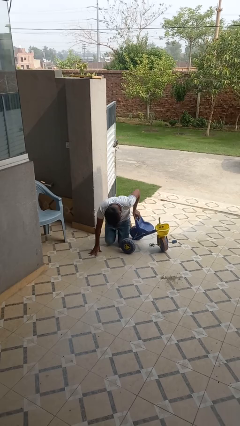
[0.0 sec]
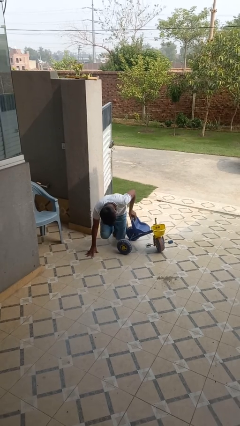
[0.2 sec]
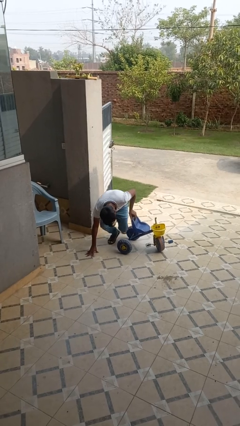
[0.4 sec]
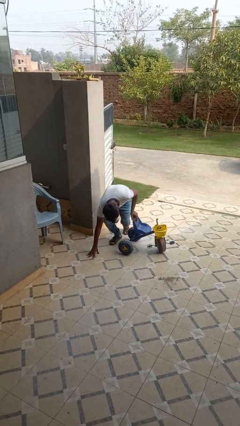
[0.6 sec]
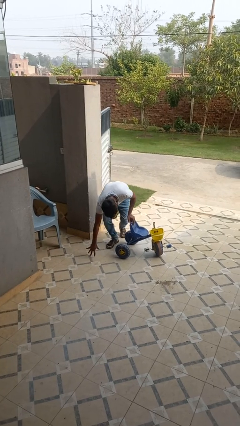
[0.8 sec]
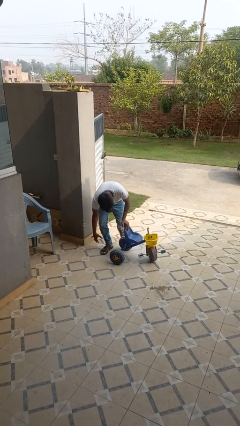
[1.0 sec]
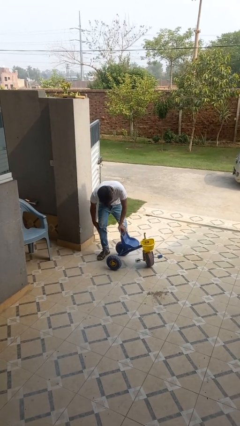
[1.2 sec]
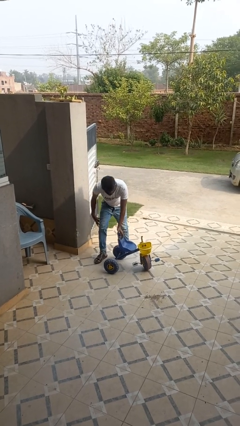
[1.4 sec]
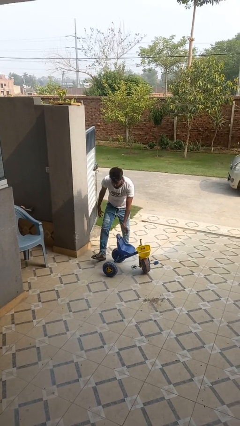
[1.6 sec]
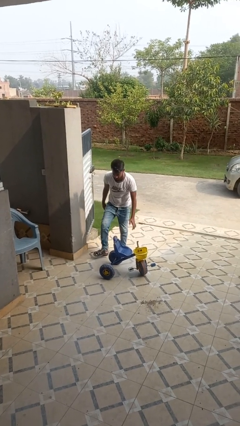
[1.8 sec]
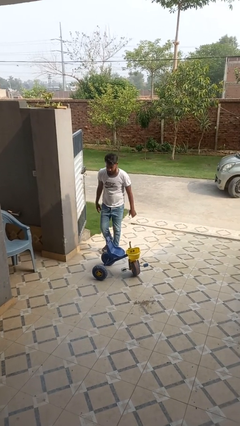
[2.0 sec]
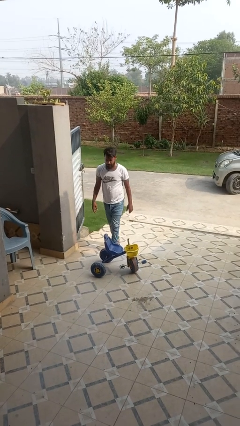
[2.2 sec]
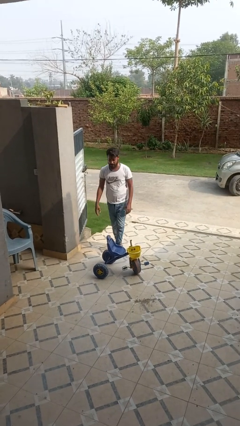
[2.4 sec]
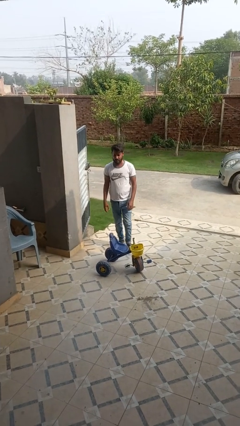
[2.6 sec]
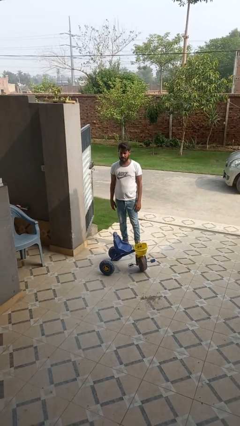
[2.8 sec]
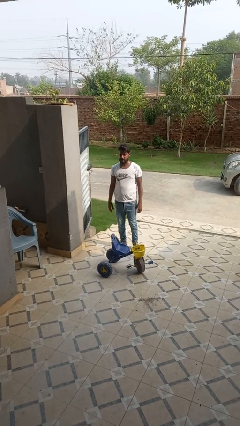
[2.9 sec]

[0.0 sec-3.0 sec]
person stands up from floor

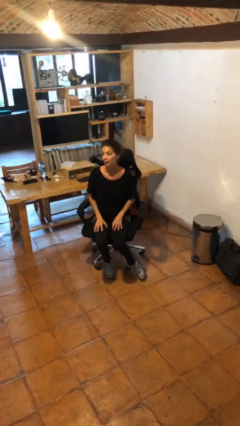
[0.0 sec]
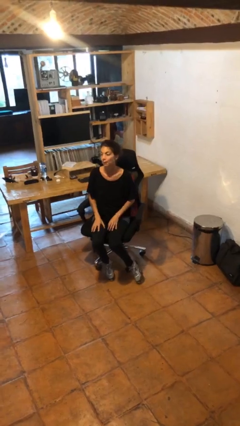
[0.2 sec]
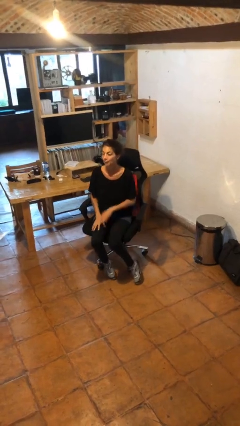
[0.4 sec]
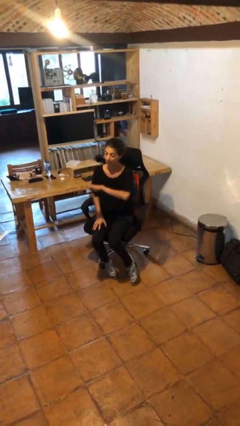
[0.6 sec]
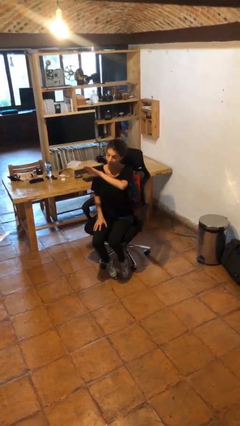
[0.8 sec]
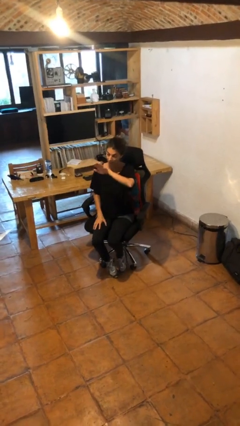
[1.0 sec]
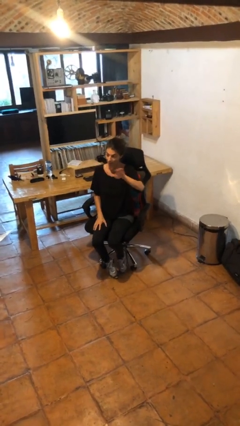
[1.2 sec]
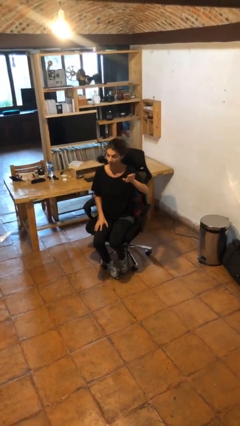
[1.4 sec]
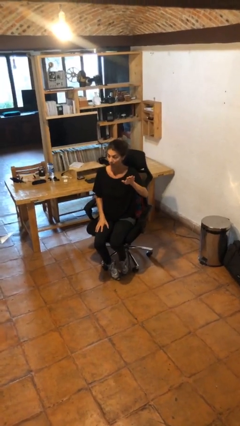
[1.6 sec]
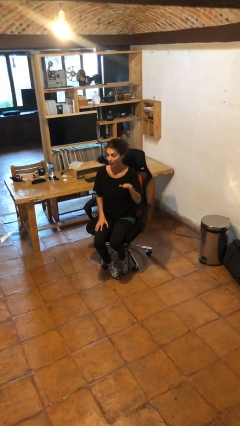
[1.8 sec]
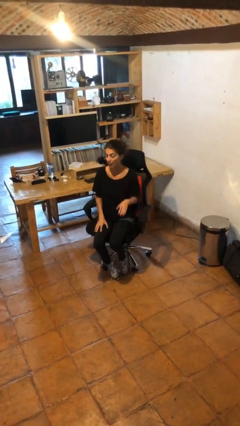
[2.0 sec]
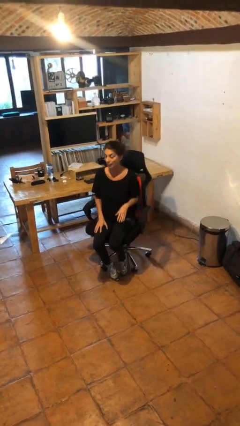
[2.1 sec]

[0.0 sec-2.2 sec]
person gestures swipe left

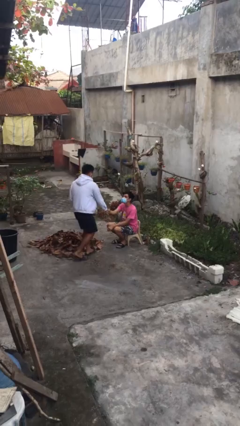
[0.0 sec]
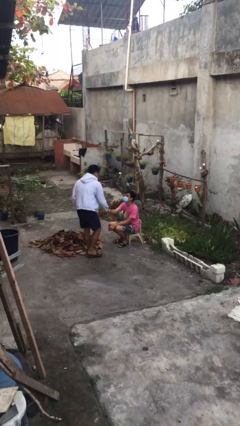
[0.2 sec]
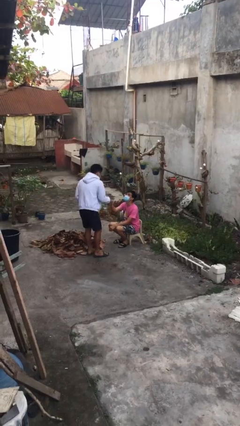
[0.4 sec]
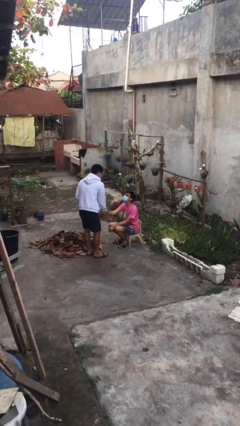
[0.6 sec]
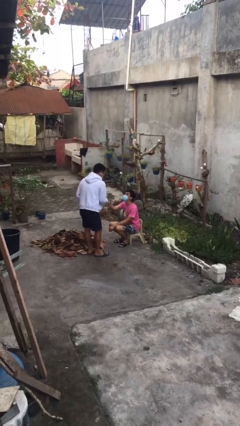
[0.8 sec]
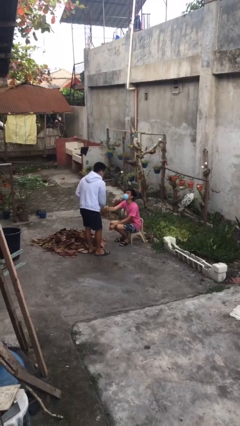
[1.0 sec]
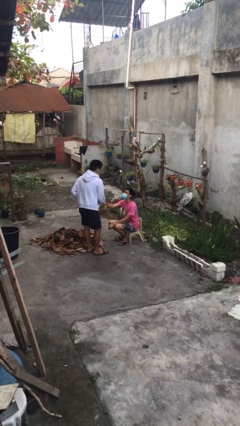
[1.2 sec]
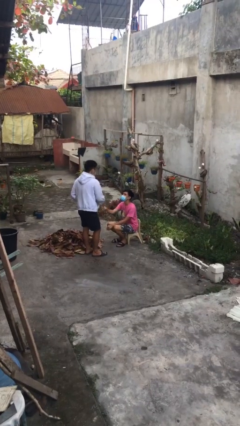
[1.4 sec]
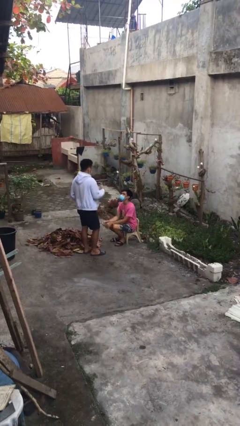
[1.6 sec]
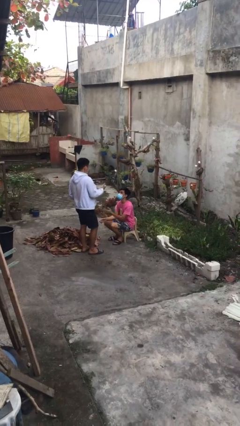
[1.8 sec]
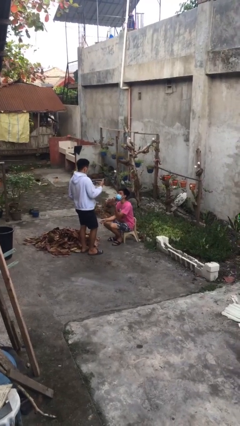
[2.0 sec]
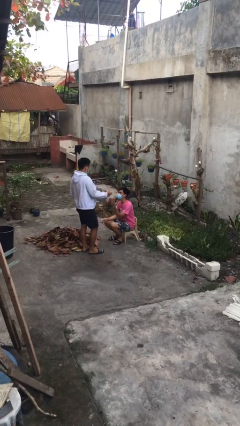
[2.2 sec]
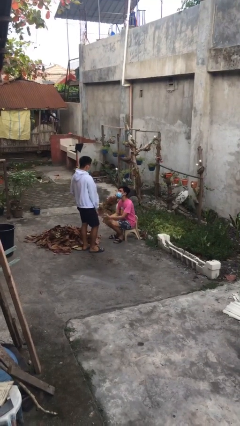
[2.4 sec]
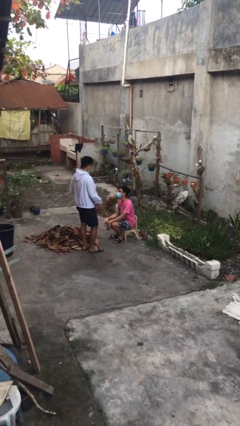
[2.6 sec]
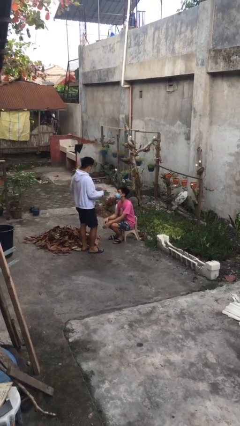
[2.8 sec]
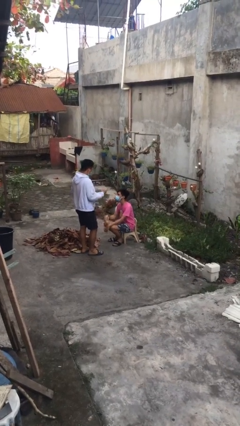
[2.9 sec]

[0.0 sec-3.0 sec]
person shakes hand

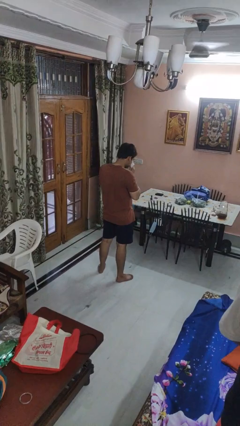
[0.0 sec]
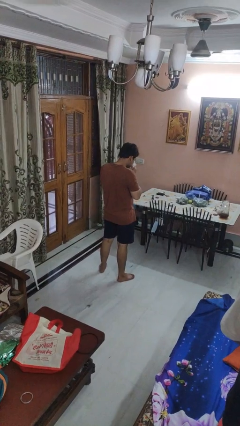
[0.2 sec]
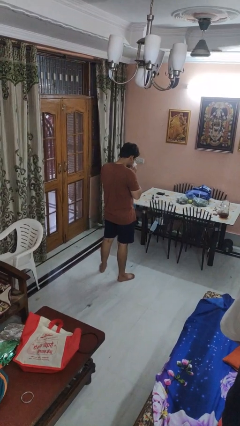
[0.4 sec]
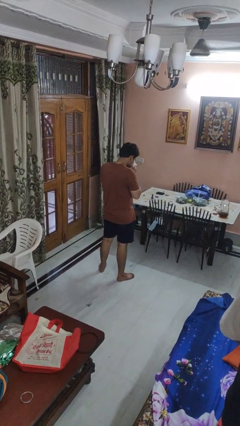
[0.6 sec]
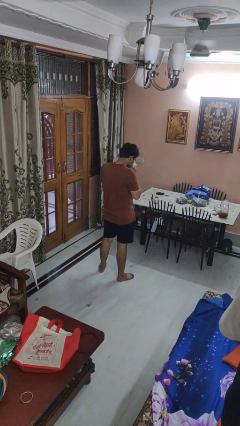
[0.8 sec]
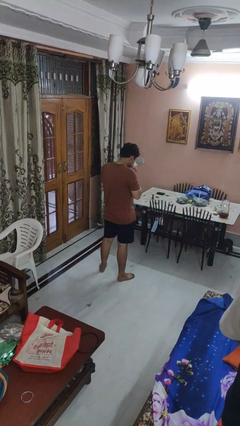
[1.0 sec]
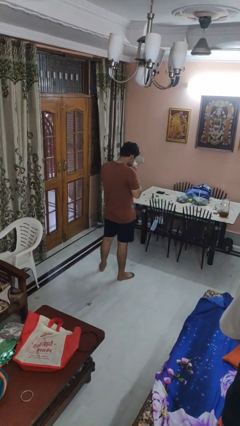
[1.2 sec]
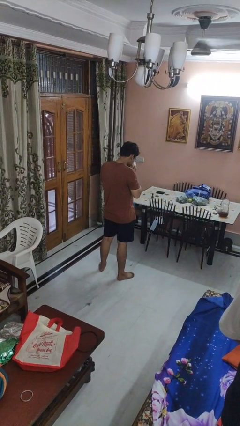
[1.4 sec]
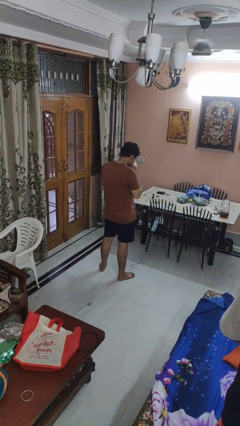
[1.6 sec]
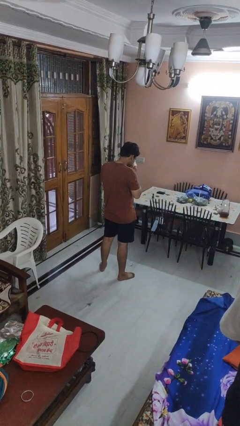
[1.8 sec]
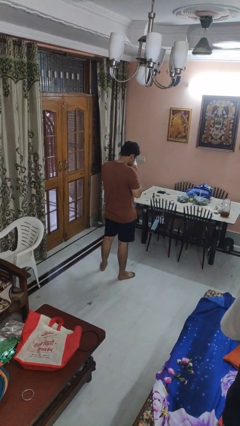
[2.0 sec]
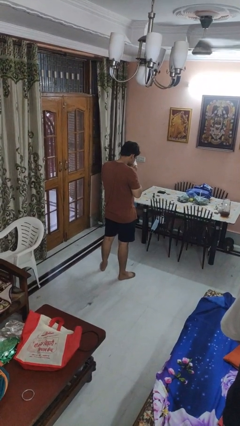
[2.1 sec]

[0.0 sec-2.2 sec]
person blows nose

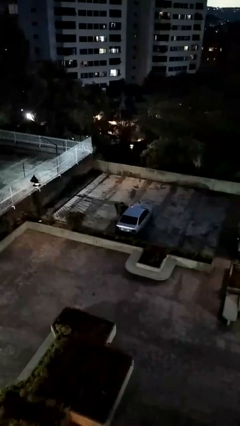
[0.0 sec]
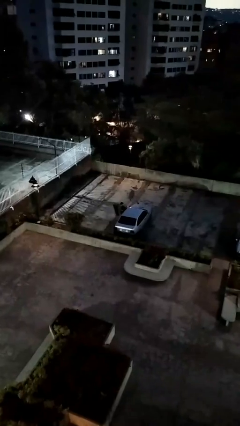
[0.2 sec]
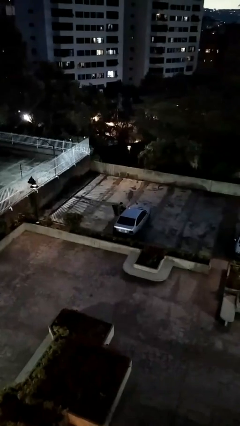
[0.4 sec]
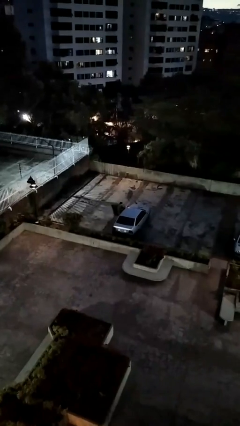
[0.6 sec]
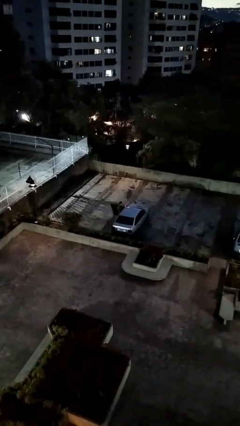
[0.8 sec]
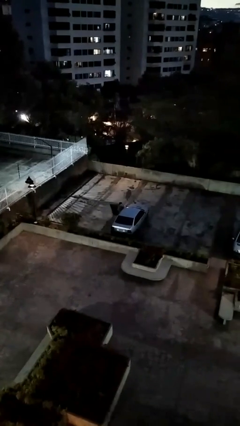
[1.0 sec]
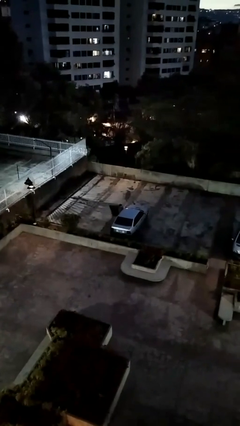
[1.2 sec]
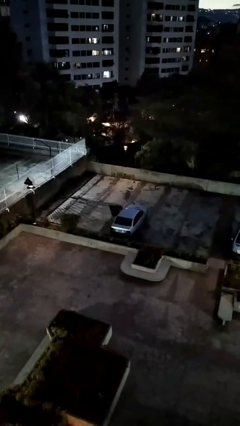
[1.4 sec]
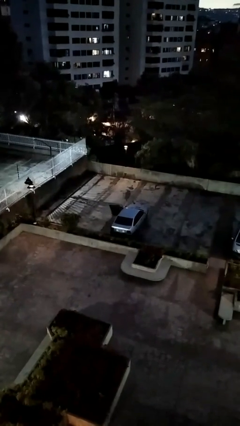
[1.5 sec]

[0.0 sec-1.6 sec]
person enters car

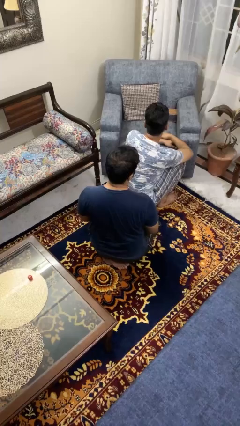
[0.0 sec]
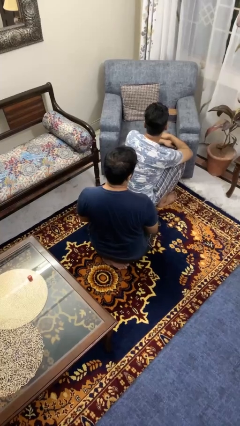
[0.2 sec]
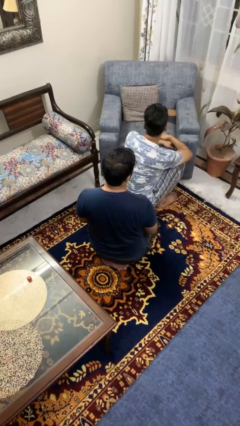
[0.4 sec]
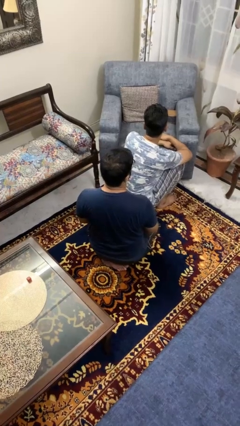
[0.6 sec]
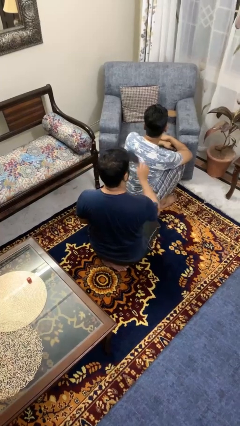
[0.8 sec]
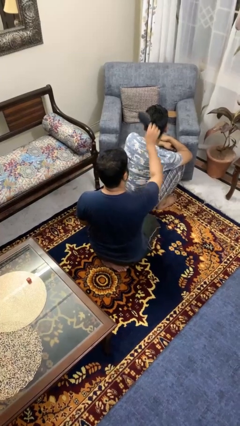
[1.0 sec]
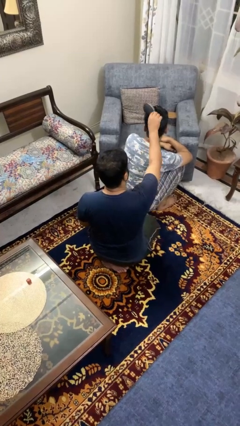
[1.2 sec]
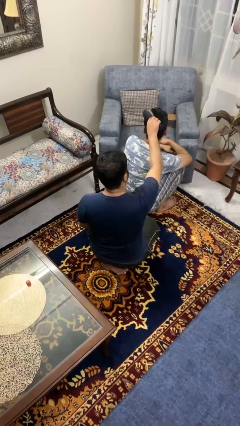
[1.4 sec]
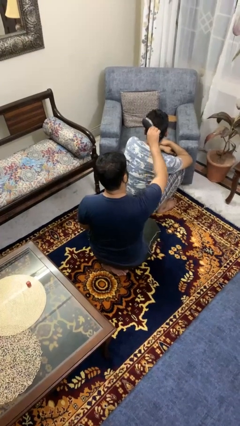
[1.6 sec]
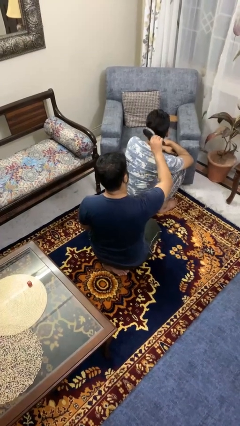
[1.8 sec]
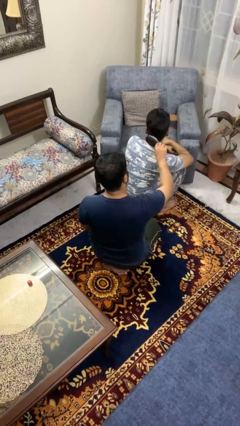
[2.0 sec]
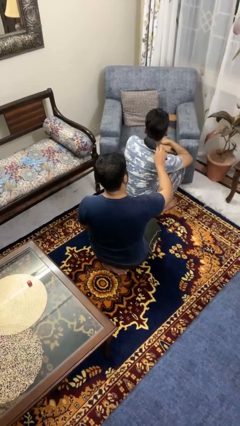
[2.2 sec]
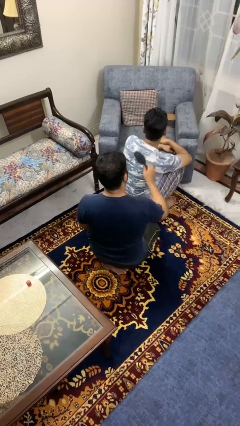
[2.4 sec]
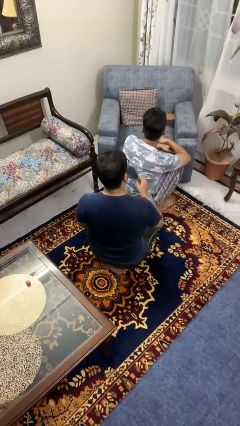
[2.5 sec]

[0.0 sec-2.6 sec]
person brushes hair of person

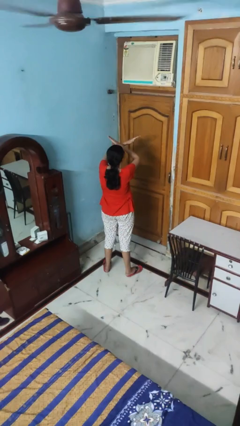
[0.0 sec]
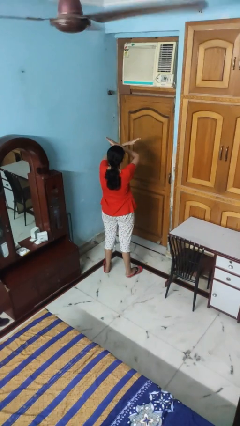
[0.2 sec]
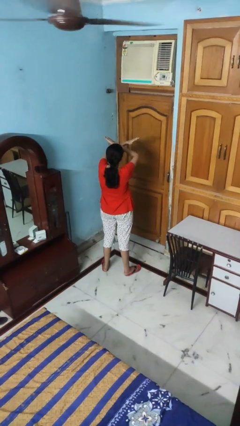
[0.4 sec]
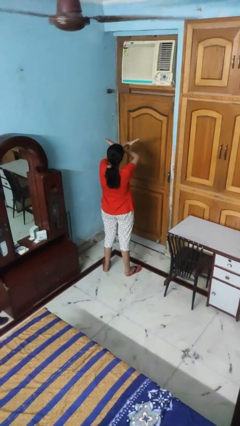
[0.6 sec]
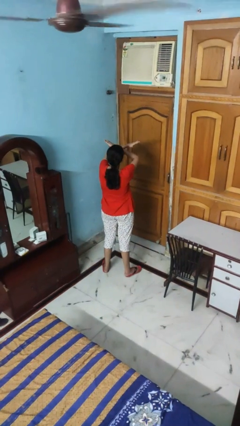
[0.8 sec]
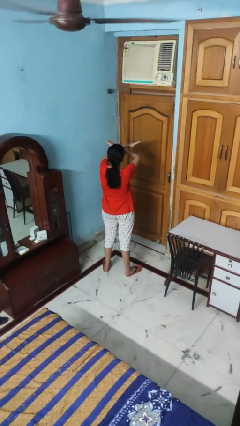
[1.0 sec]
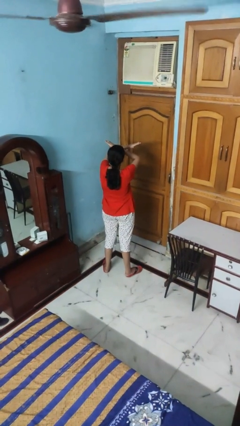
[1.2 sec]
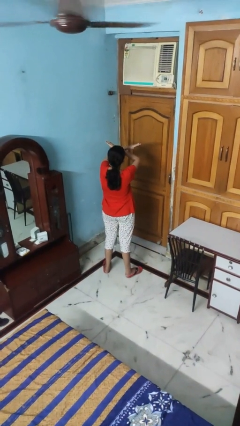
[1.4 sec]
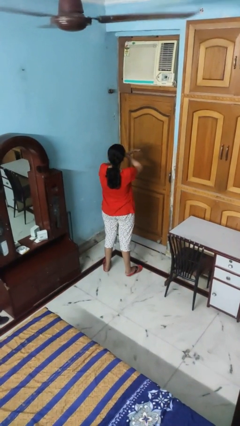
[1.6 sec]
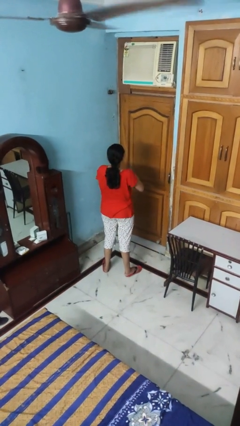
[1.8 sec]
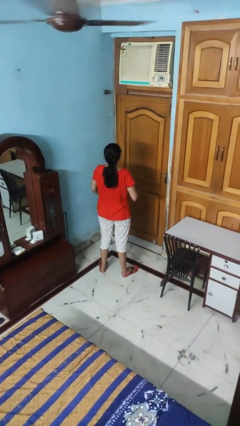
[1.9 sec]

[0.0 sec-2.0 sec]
person gestures arms x

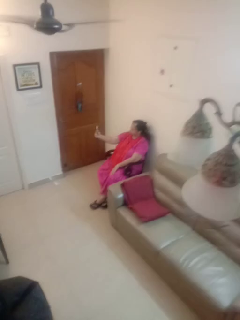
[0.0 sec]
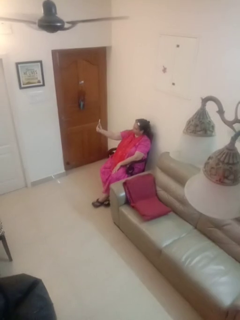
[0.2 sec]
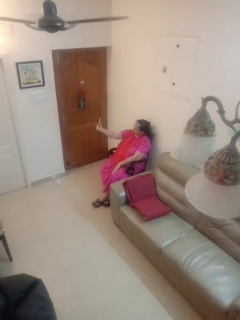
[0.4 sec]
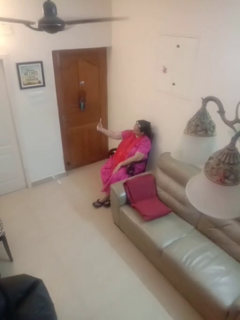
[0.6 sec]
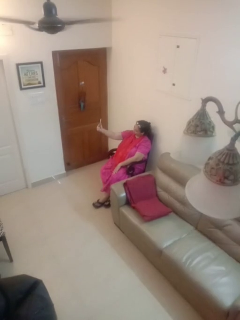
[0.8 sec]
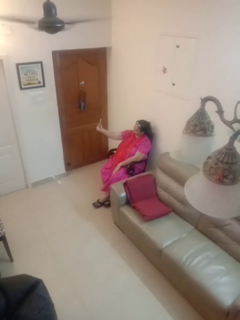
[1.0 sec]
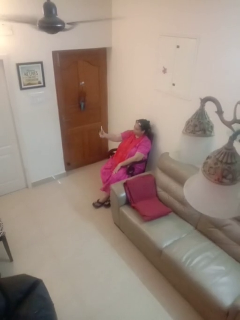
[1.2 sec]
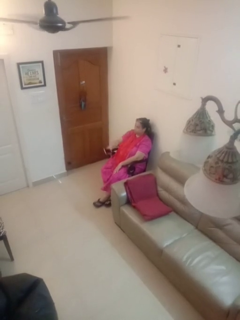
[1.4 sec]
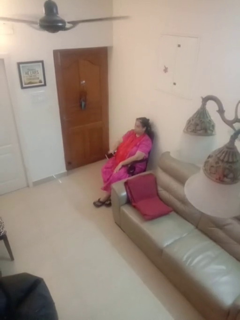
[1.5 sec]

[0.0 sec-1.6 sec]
person takes selfie
